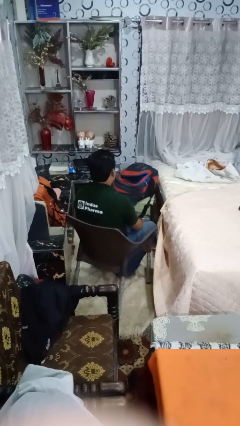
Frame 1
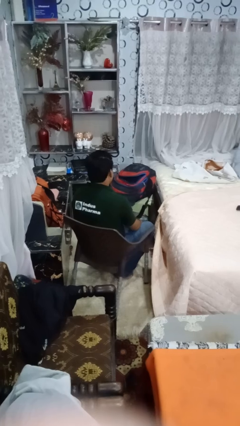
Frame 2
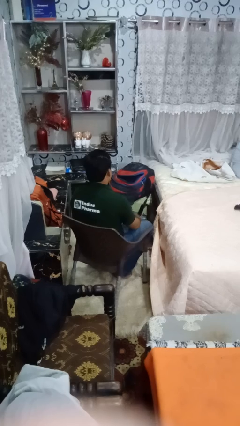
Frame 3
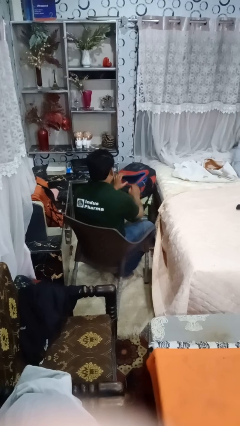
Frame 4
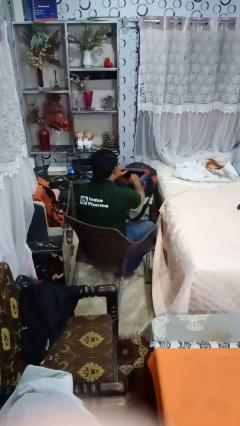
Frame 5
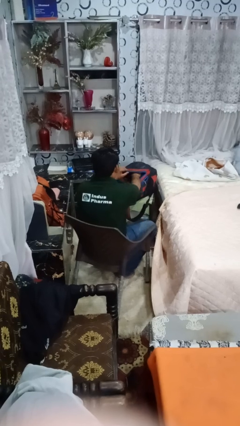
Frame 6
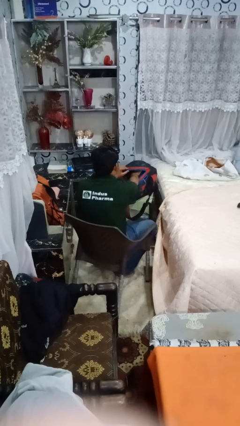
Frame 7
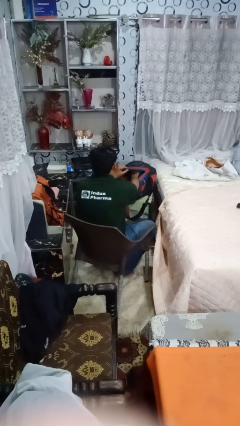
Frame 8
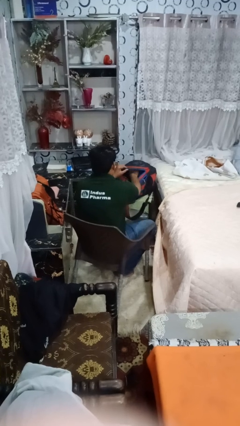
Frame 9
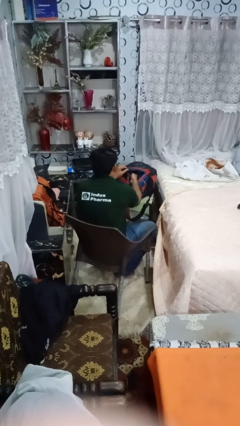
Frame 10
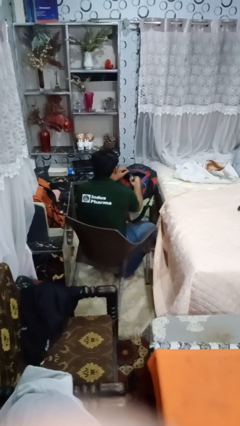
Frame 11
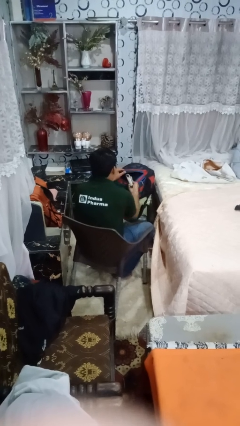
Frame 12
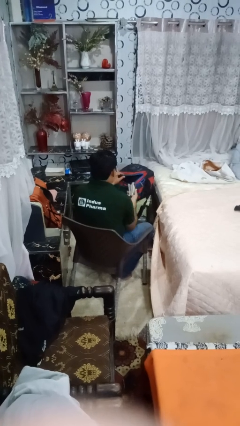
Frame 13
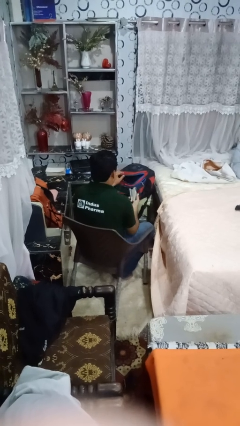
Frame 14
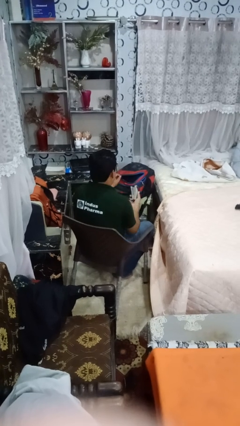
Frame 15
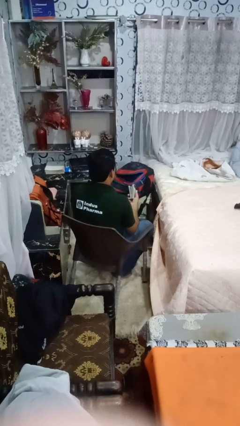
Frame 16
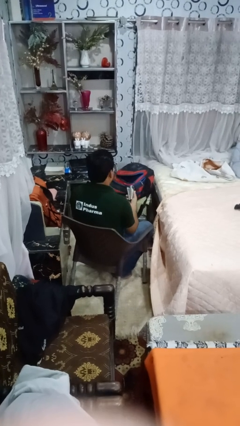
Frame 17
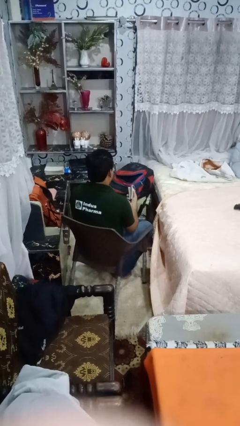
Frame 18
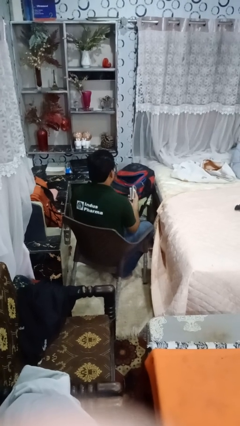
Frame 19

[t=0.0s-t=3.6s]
person searches in backpack

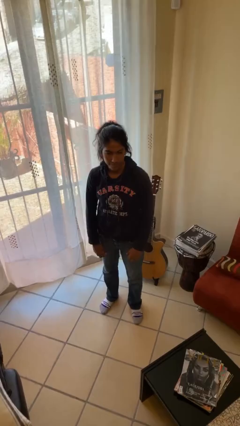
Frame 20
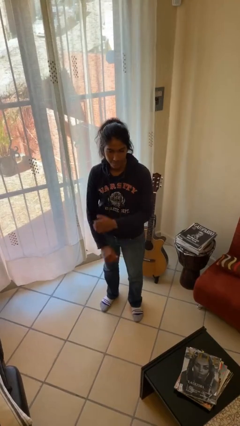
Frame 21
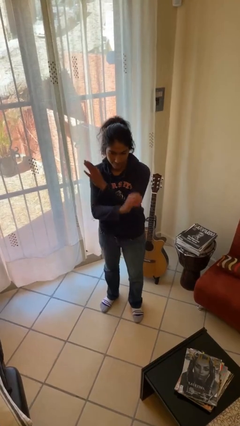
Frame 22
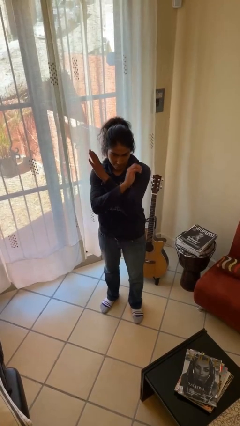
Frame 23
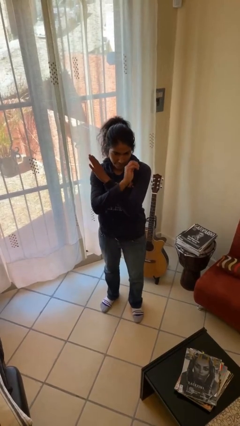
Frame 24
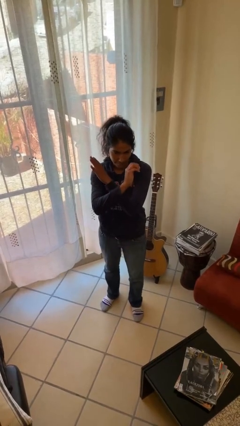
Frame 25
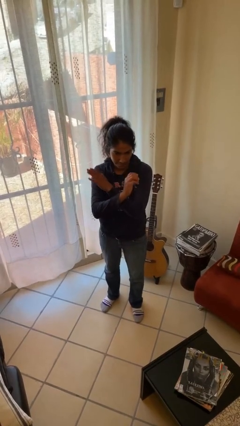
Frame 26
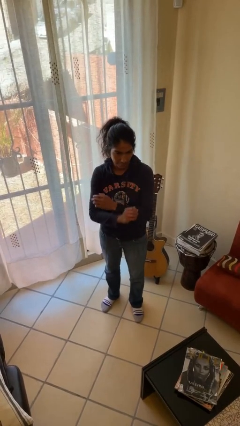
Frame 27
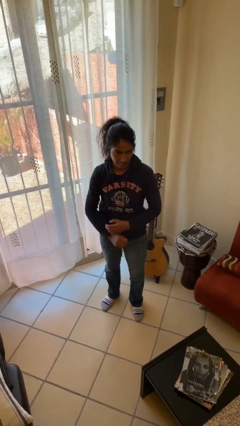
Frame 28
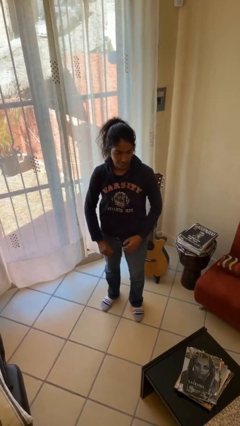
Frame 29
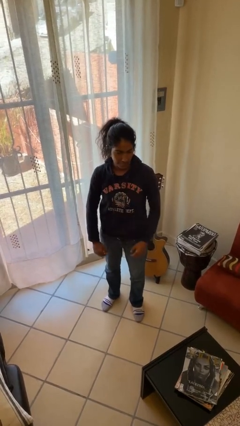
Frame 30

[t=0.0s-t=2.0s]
person gestures arms x

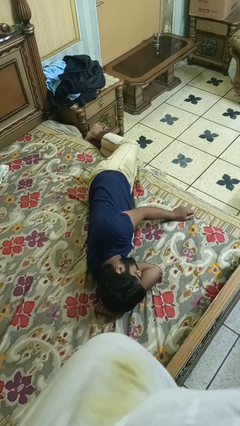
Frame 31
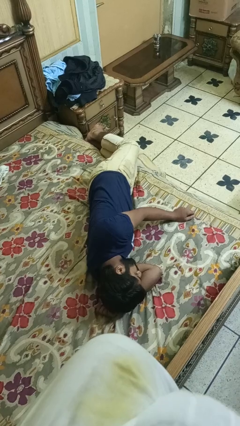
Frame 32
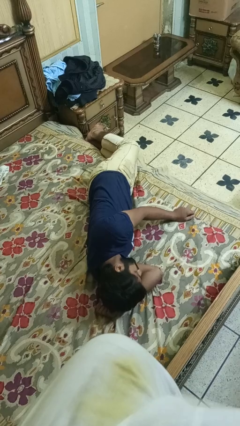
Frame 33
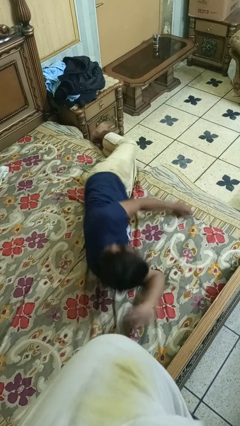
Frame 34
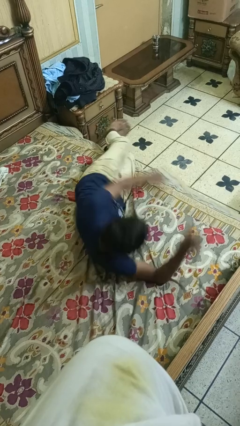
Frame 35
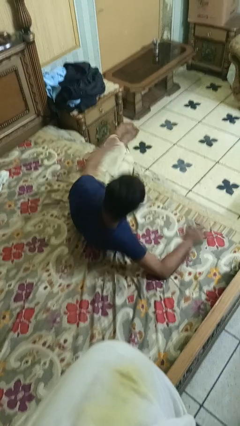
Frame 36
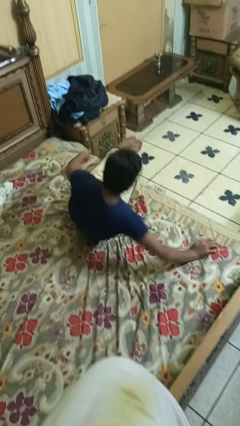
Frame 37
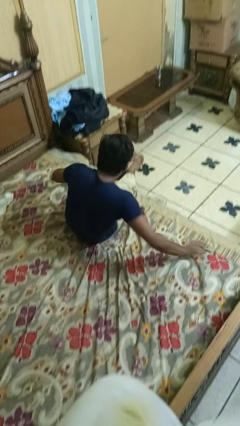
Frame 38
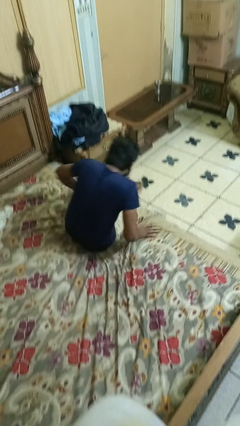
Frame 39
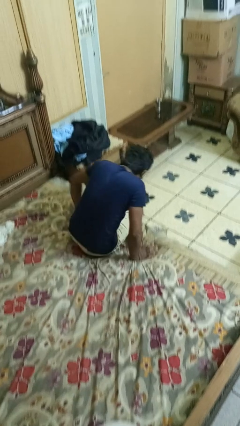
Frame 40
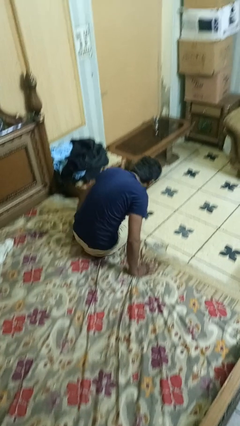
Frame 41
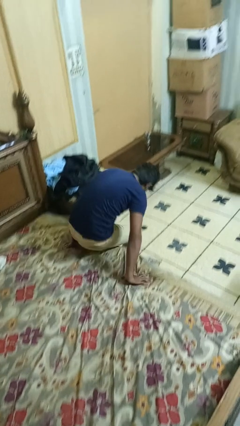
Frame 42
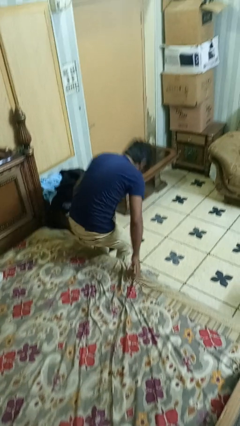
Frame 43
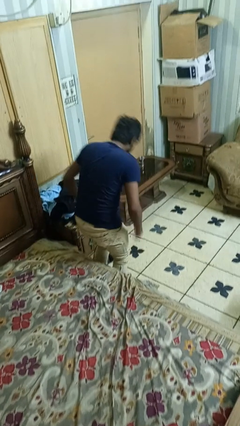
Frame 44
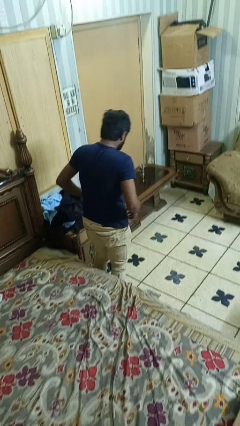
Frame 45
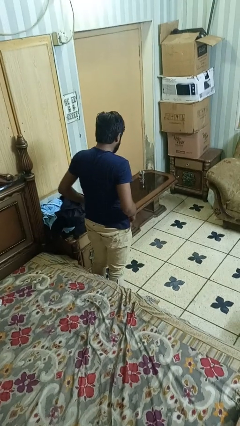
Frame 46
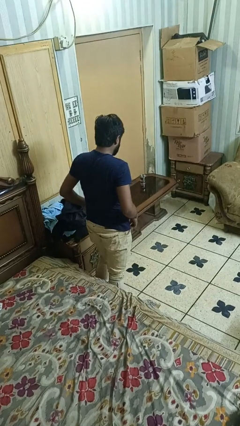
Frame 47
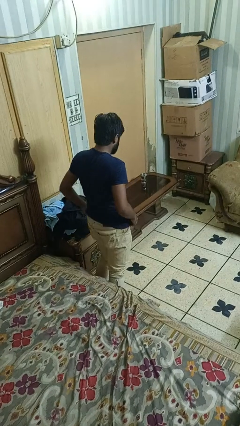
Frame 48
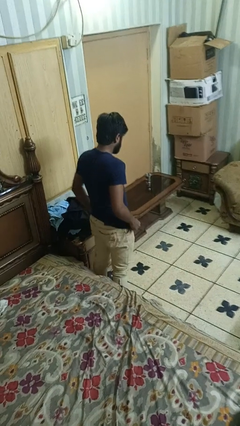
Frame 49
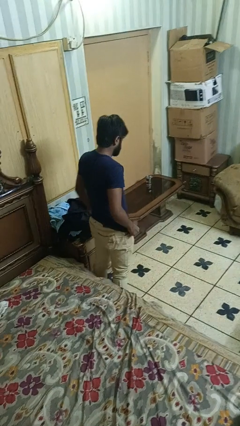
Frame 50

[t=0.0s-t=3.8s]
person stands up

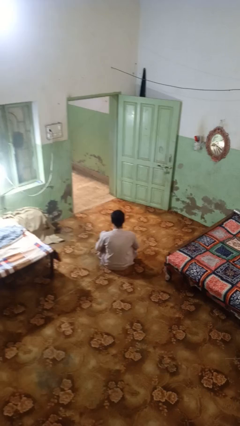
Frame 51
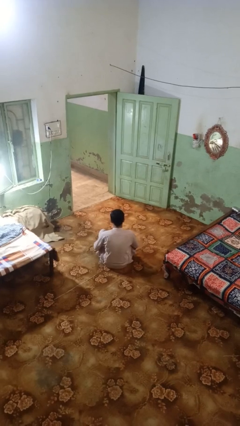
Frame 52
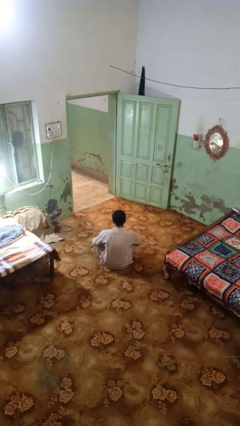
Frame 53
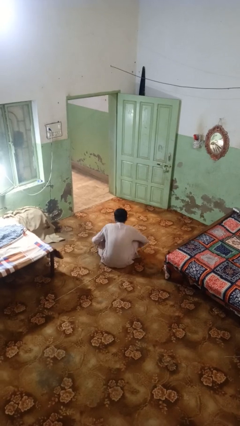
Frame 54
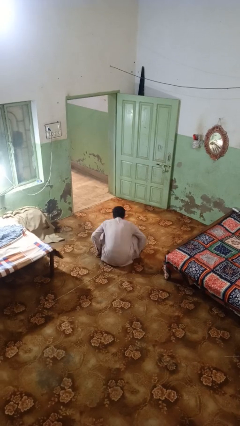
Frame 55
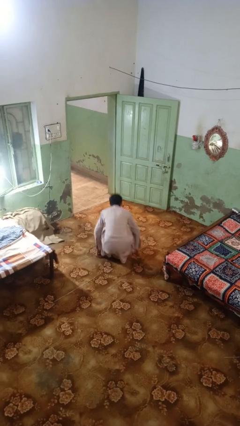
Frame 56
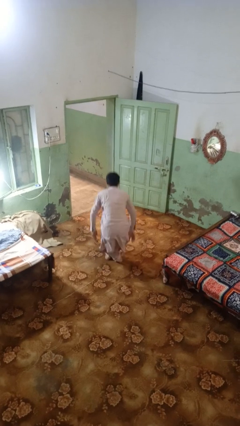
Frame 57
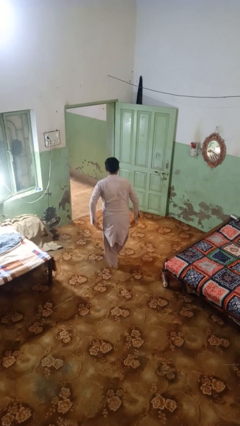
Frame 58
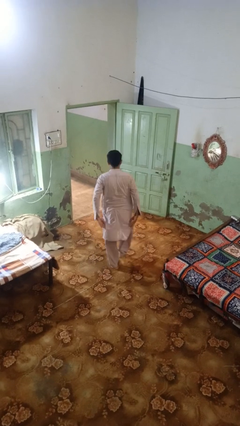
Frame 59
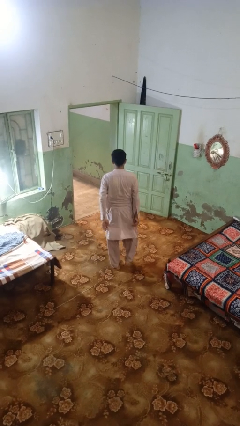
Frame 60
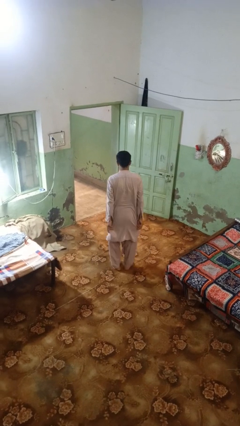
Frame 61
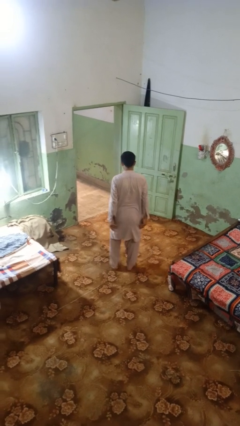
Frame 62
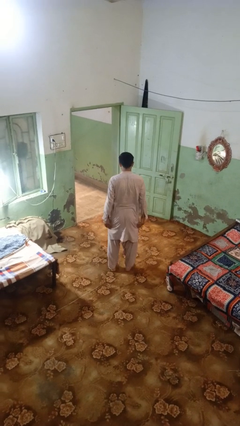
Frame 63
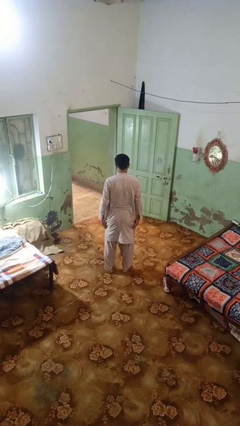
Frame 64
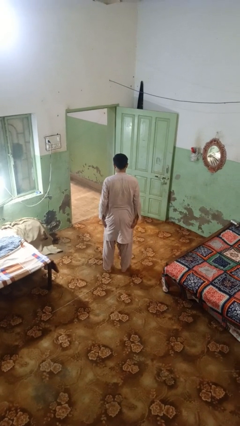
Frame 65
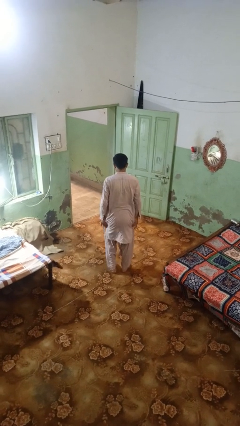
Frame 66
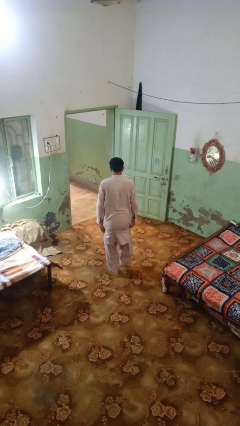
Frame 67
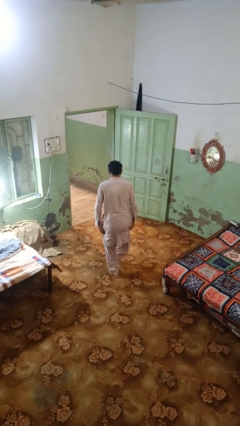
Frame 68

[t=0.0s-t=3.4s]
person stands up from floor

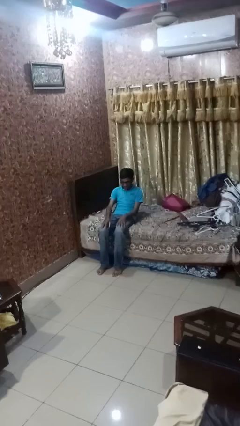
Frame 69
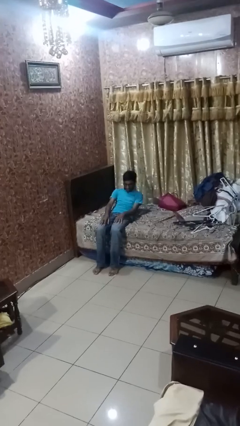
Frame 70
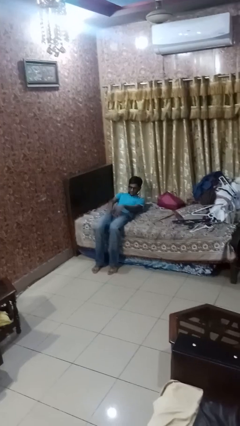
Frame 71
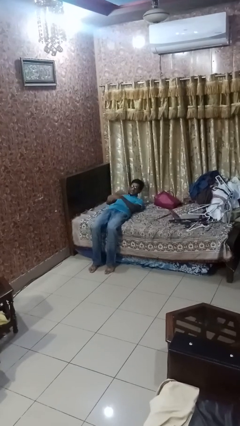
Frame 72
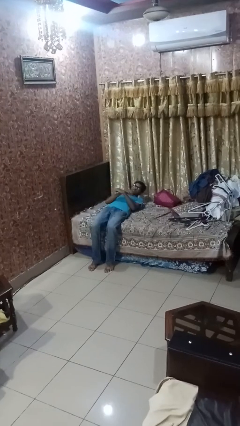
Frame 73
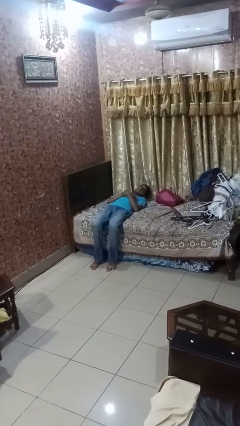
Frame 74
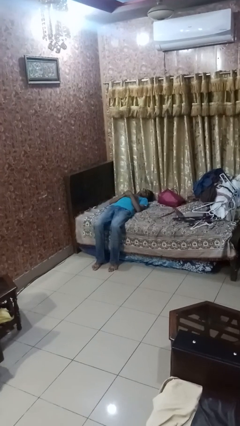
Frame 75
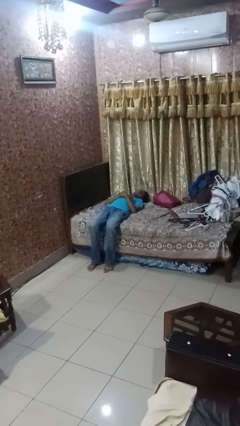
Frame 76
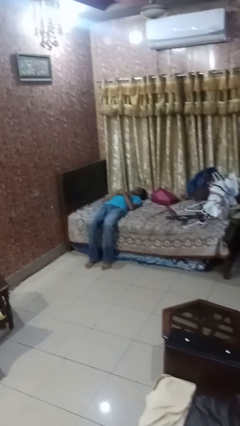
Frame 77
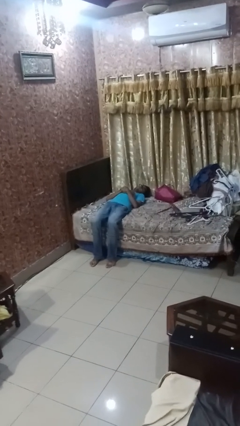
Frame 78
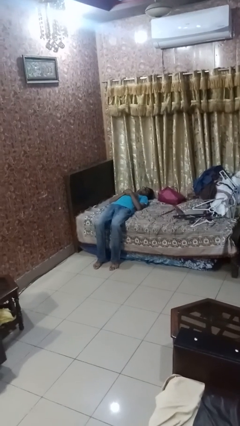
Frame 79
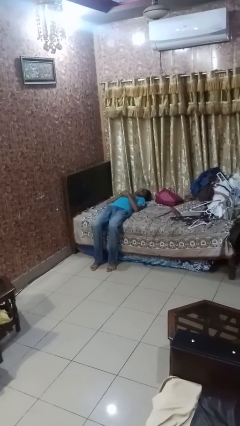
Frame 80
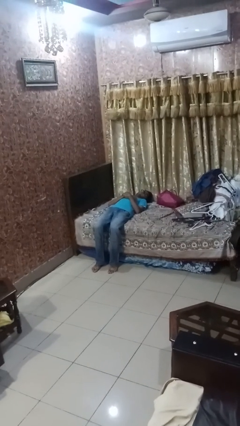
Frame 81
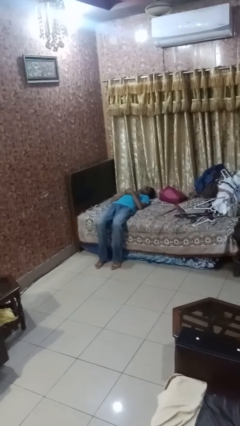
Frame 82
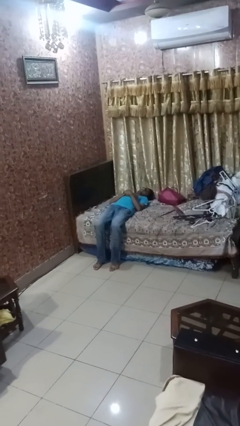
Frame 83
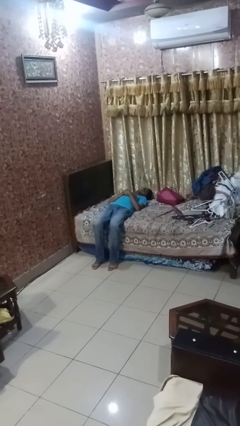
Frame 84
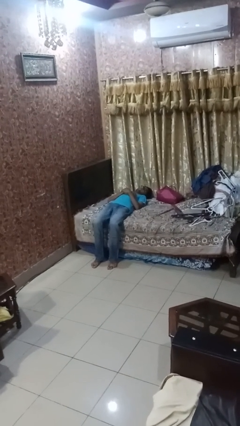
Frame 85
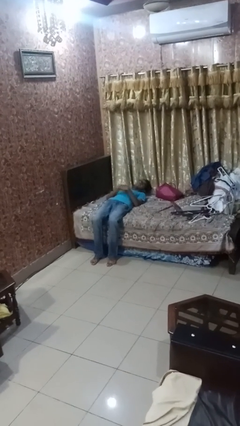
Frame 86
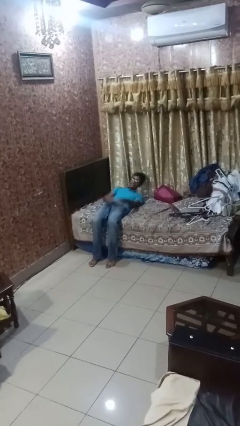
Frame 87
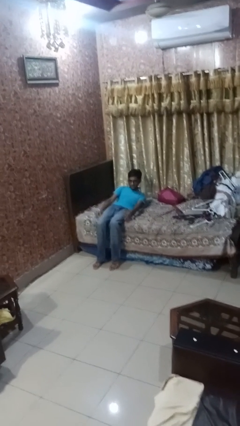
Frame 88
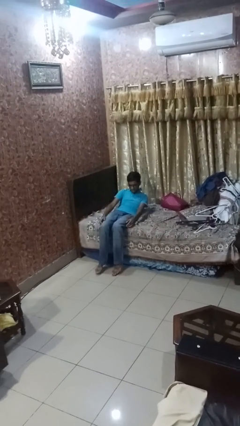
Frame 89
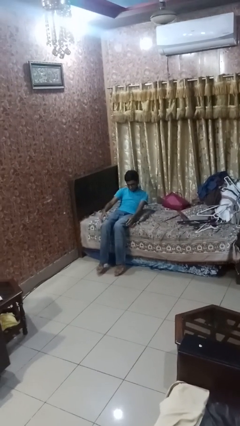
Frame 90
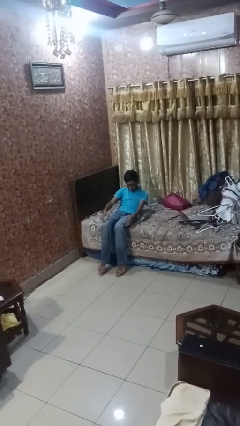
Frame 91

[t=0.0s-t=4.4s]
person lies down on bed

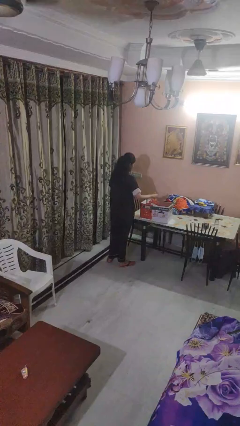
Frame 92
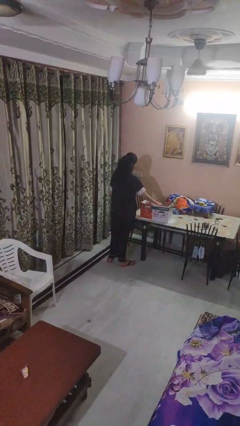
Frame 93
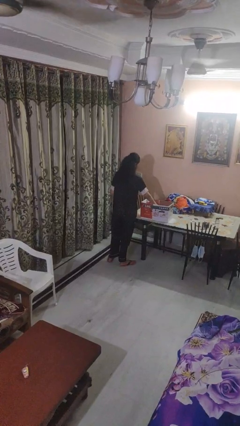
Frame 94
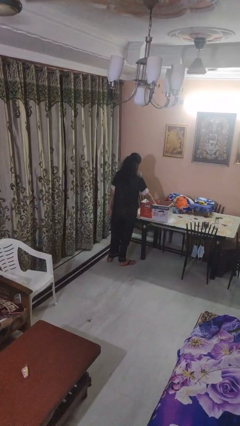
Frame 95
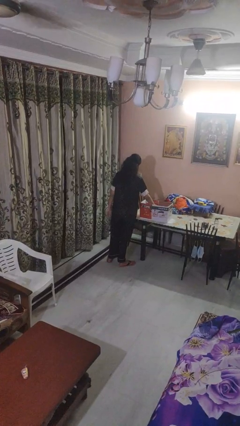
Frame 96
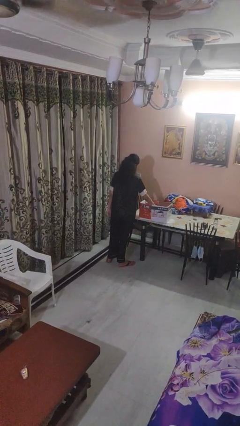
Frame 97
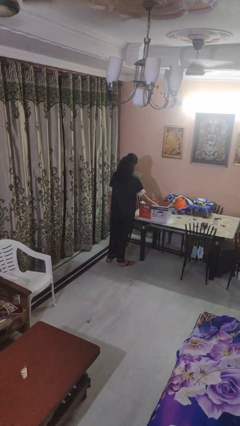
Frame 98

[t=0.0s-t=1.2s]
person puts object into box
